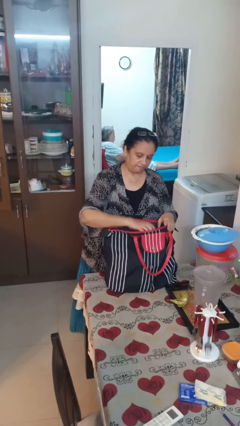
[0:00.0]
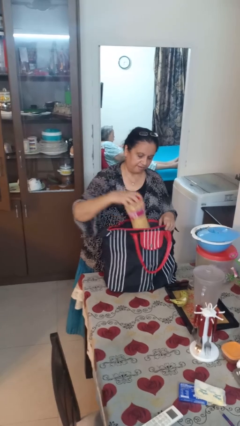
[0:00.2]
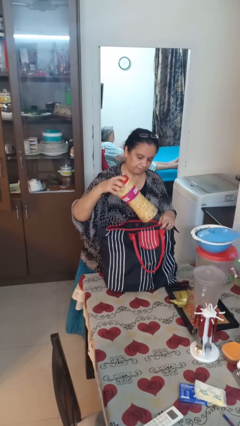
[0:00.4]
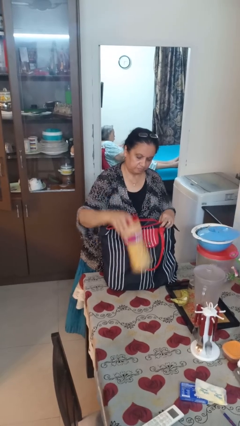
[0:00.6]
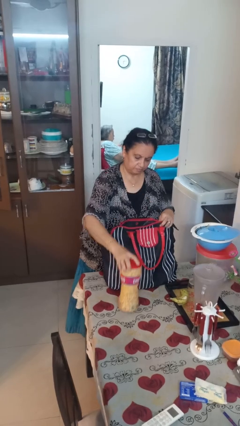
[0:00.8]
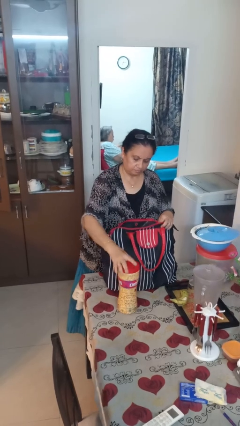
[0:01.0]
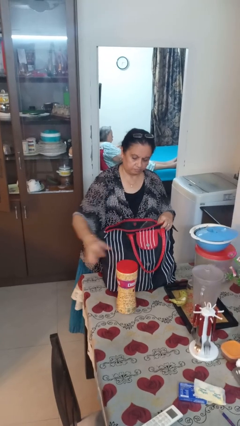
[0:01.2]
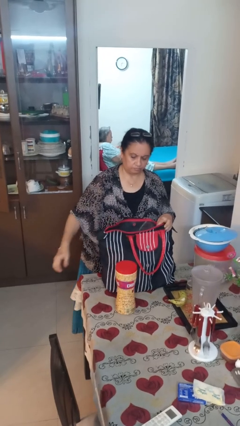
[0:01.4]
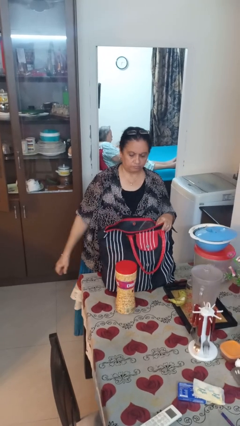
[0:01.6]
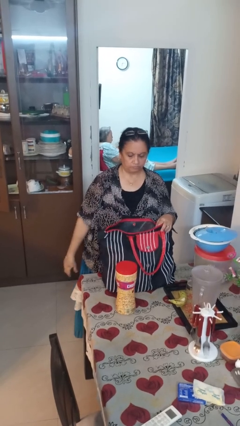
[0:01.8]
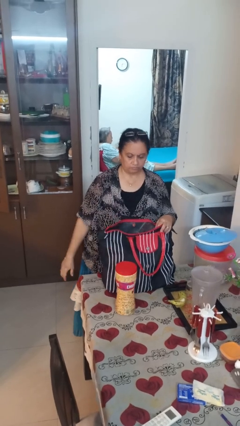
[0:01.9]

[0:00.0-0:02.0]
person takes object from bag

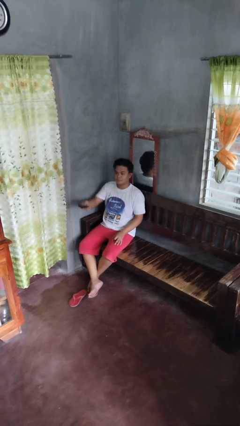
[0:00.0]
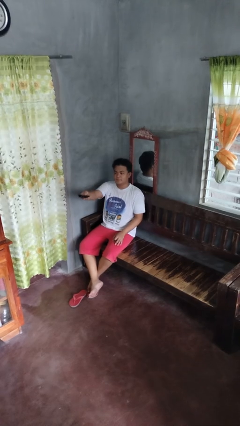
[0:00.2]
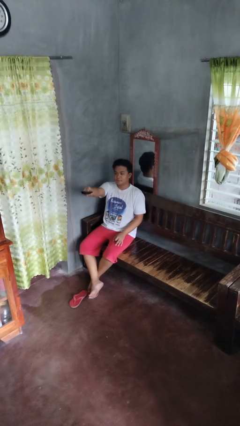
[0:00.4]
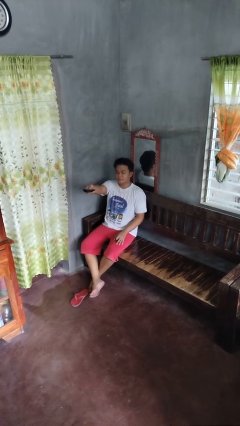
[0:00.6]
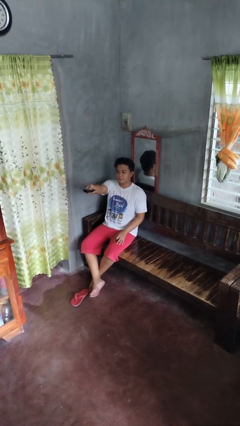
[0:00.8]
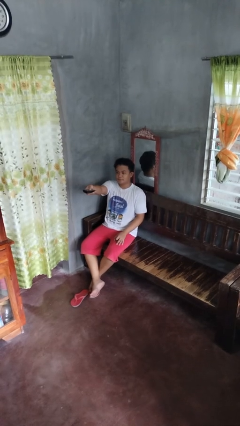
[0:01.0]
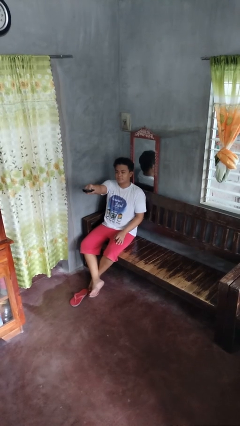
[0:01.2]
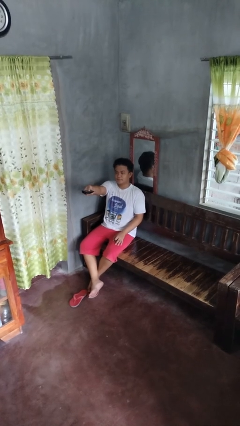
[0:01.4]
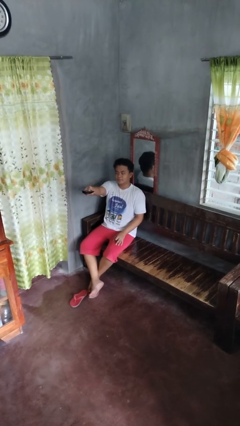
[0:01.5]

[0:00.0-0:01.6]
person uses television remote

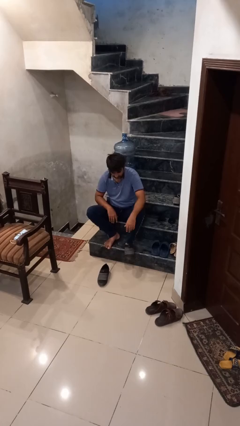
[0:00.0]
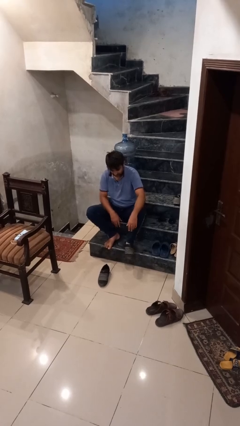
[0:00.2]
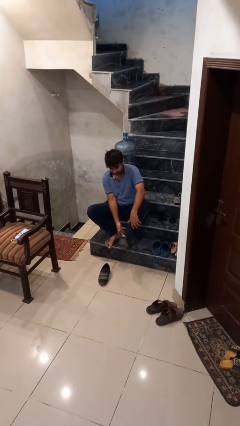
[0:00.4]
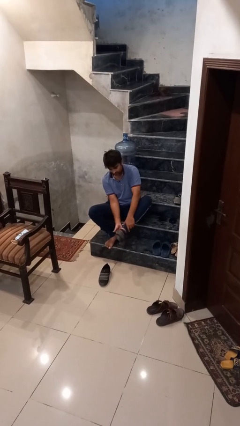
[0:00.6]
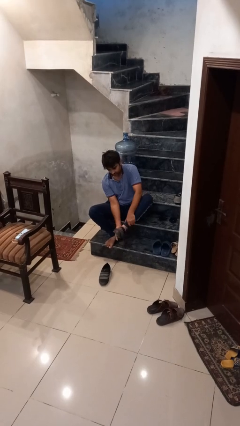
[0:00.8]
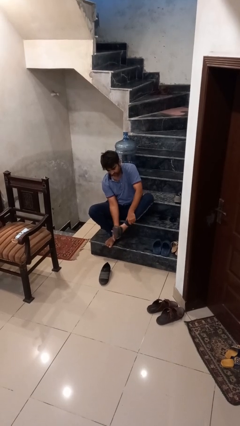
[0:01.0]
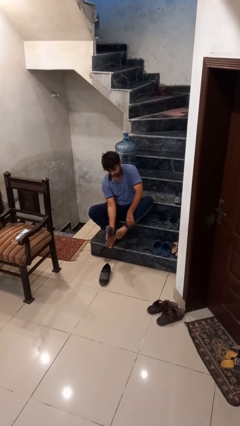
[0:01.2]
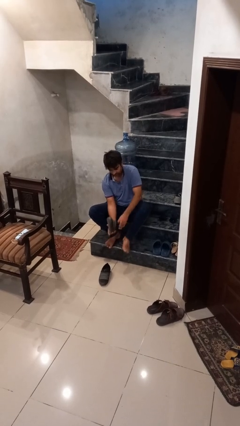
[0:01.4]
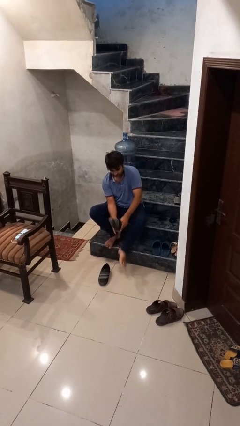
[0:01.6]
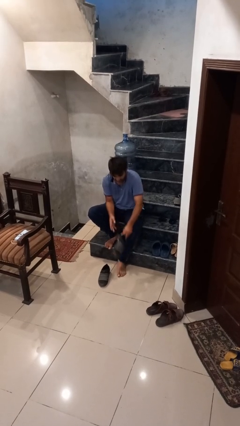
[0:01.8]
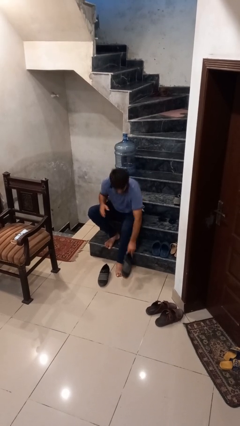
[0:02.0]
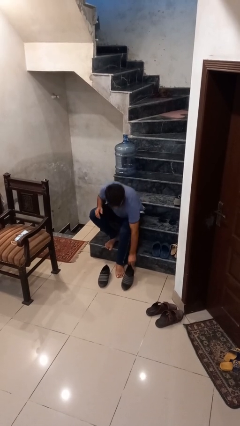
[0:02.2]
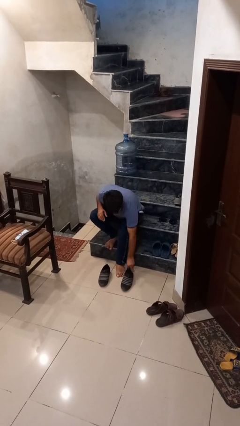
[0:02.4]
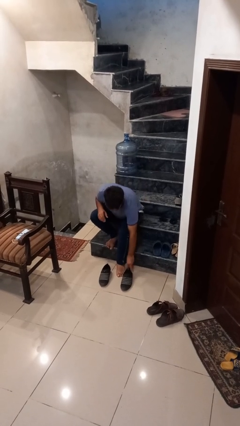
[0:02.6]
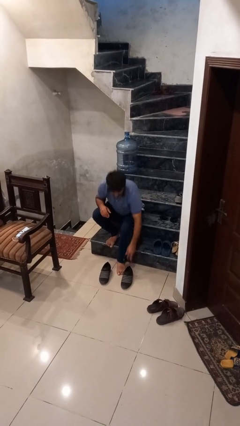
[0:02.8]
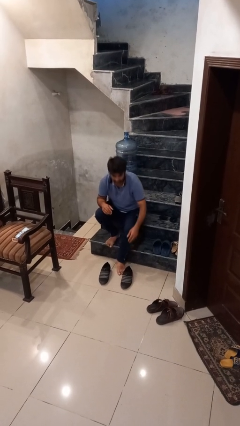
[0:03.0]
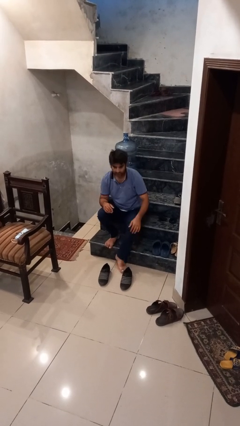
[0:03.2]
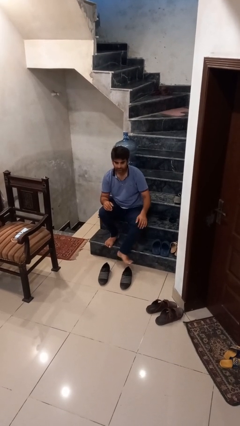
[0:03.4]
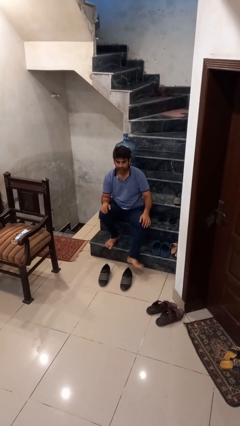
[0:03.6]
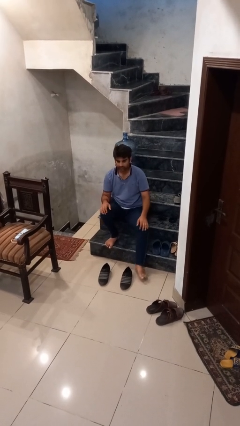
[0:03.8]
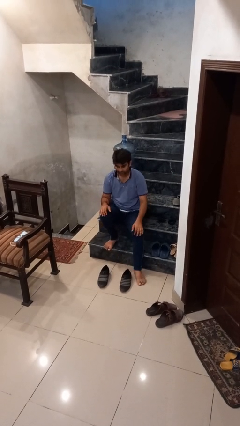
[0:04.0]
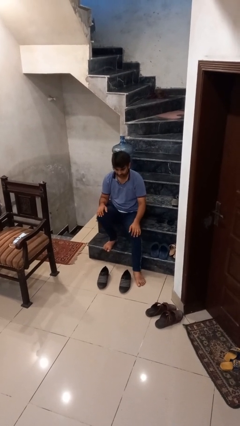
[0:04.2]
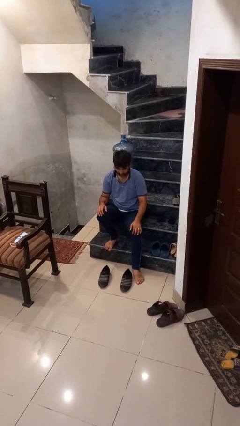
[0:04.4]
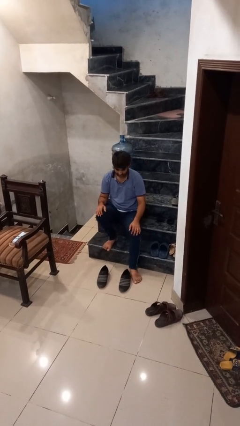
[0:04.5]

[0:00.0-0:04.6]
person takes off shoes

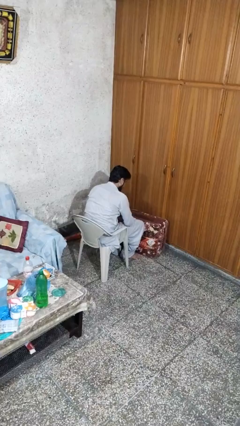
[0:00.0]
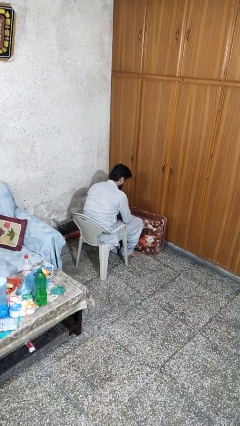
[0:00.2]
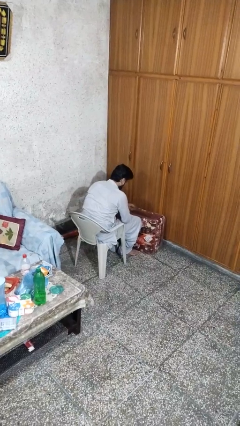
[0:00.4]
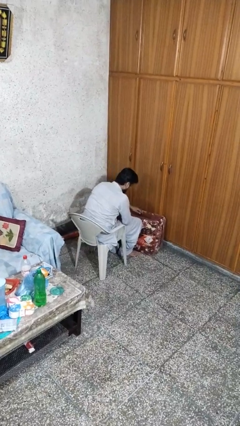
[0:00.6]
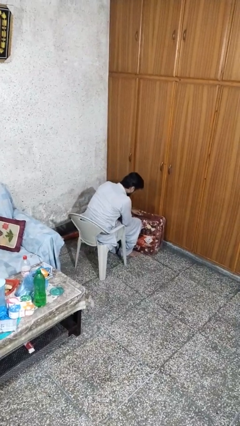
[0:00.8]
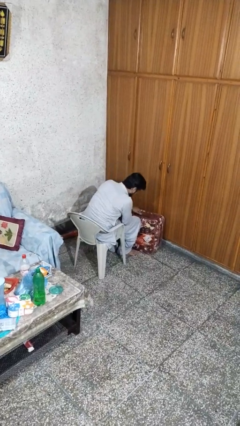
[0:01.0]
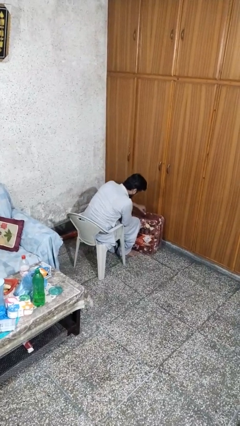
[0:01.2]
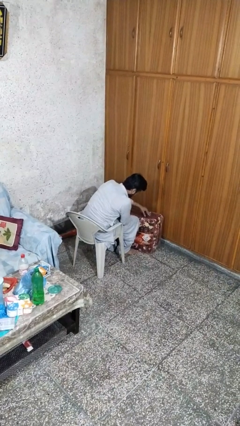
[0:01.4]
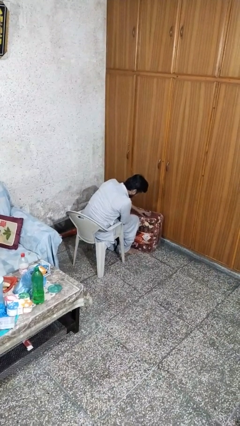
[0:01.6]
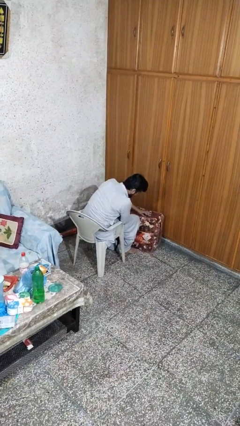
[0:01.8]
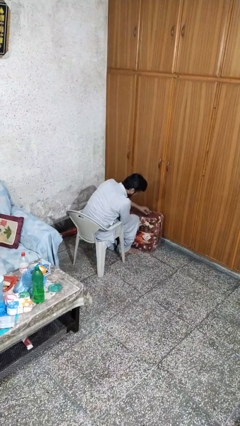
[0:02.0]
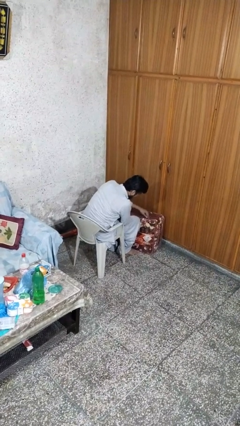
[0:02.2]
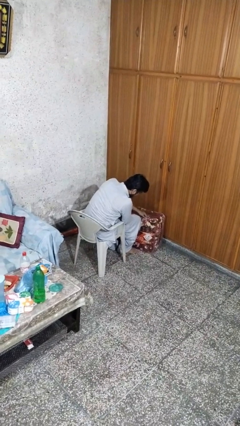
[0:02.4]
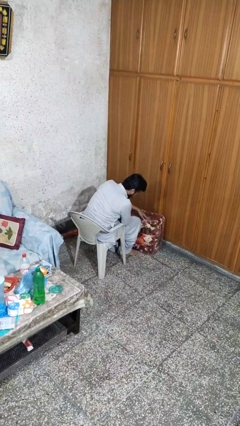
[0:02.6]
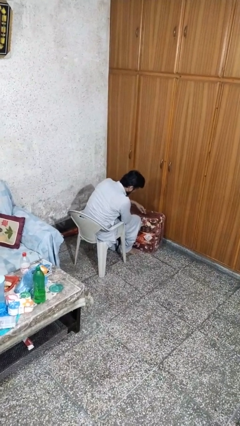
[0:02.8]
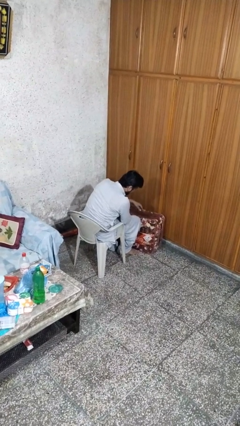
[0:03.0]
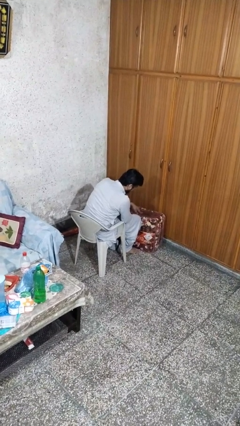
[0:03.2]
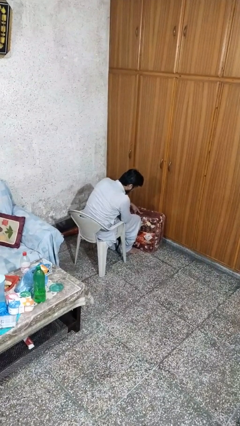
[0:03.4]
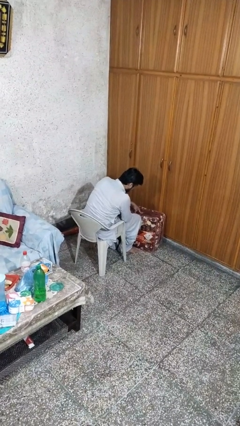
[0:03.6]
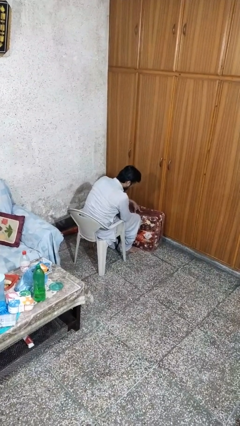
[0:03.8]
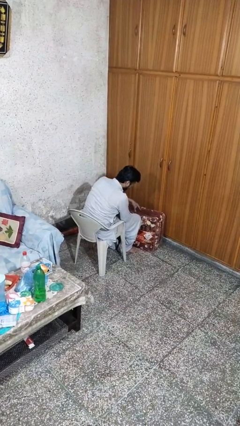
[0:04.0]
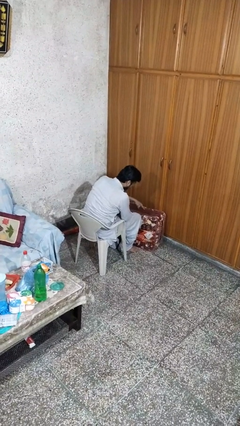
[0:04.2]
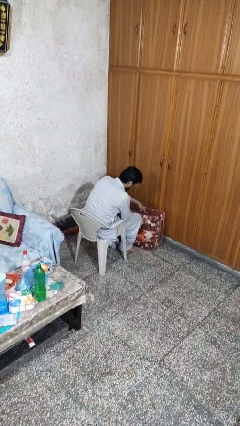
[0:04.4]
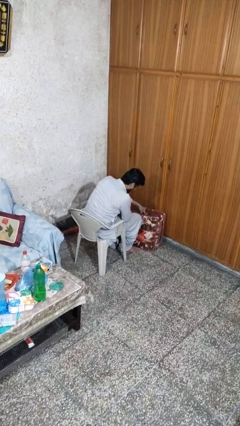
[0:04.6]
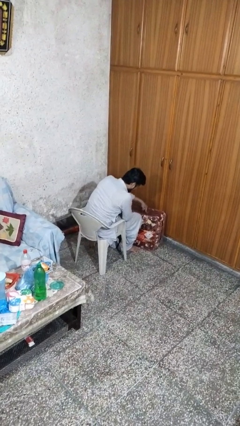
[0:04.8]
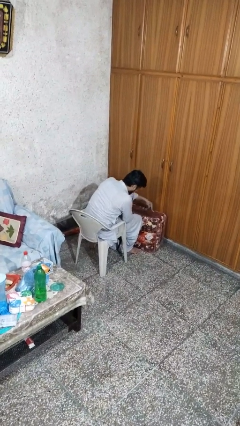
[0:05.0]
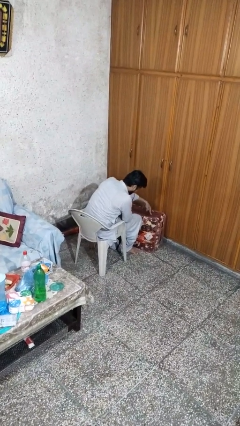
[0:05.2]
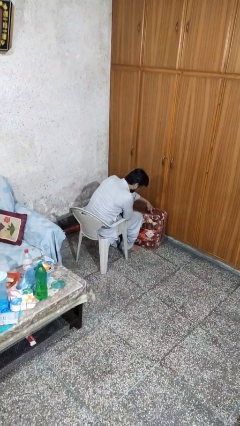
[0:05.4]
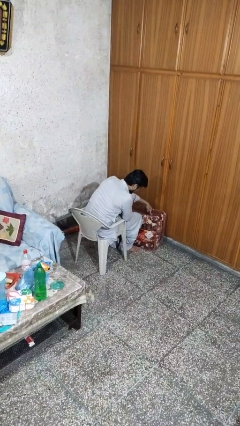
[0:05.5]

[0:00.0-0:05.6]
person taps object with finger

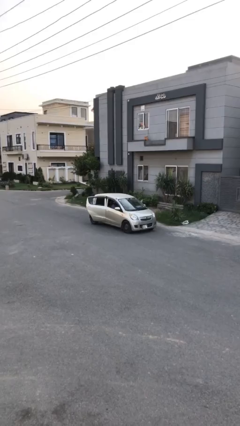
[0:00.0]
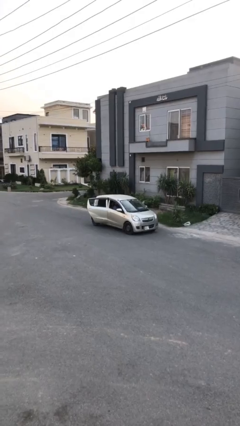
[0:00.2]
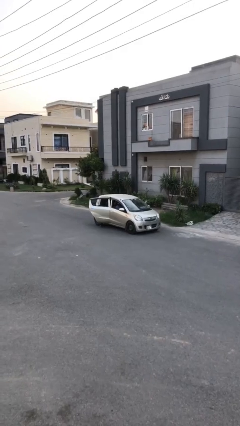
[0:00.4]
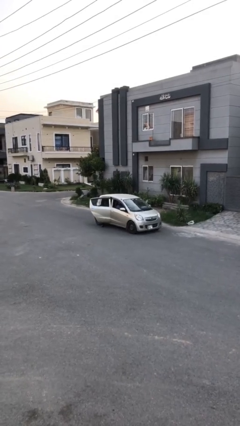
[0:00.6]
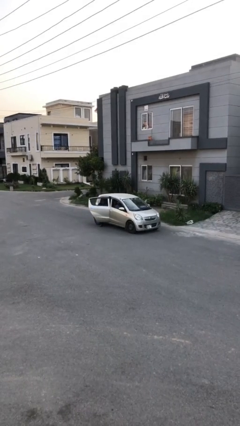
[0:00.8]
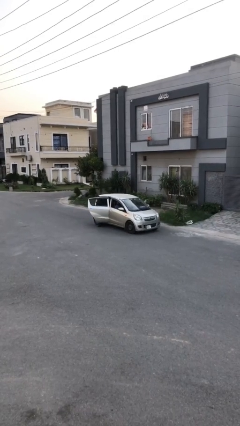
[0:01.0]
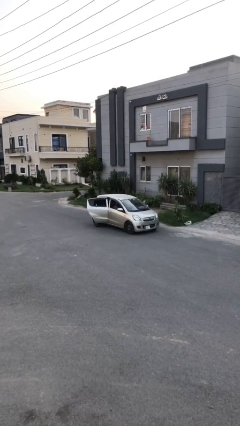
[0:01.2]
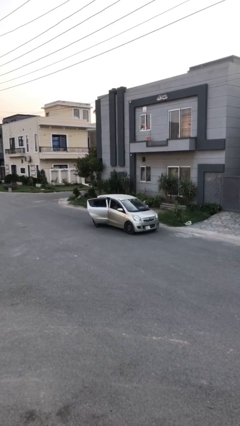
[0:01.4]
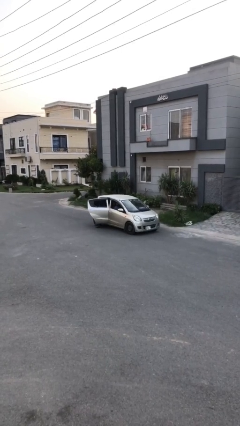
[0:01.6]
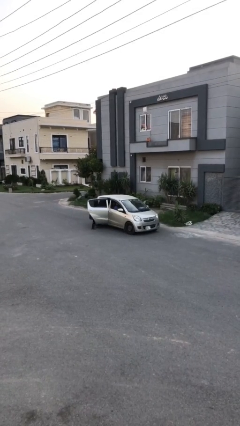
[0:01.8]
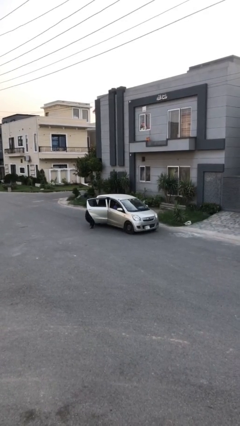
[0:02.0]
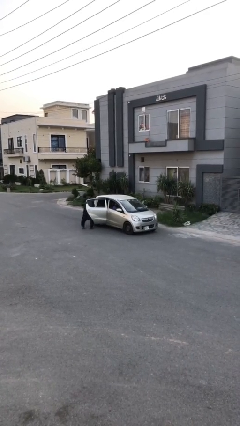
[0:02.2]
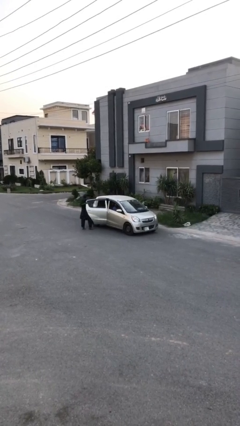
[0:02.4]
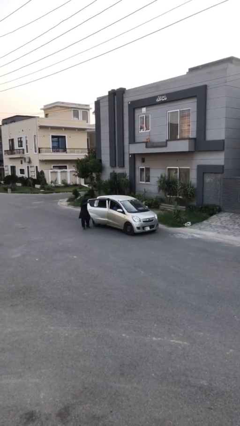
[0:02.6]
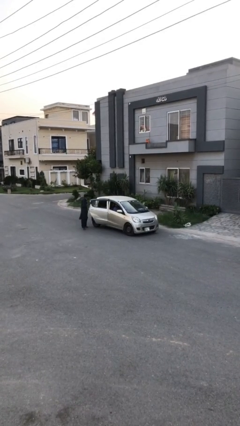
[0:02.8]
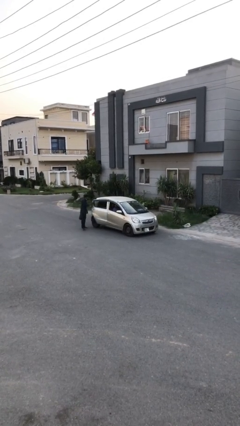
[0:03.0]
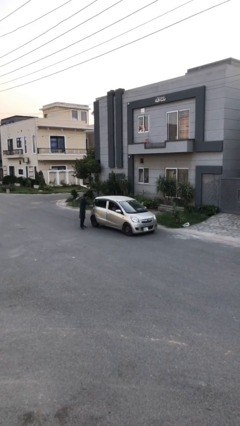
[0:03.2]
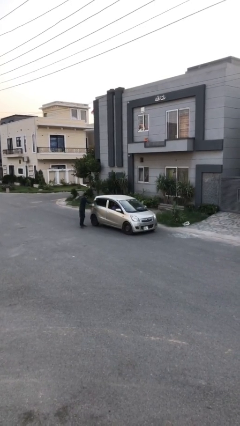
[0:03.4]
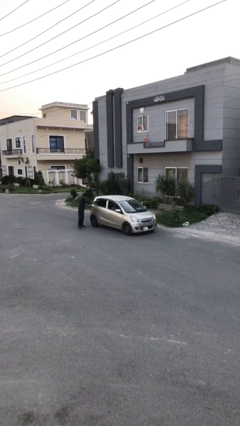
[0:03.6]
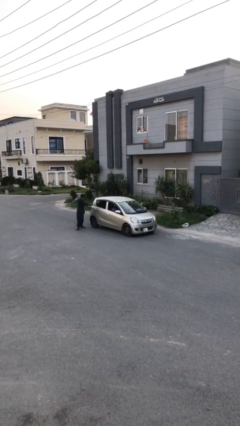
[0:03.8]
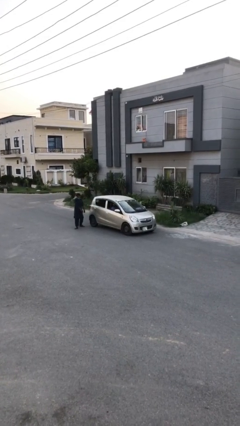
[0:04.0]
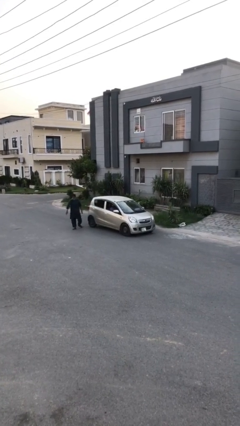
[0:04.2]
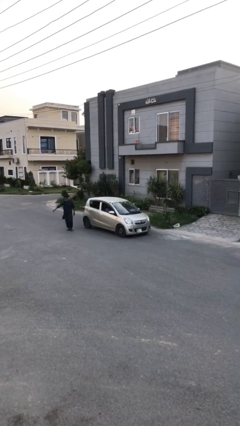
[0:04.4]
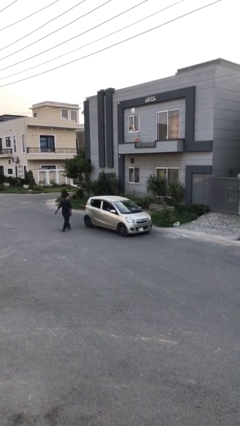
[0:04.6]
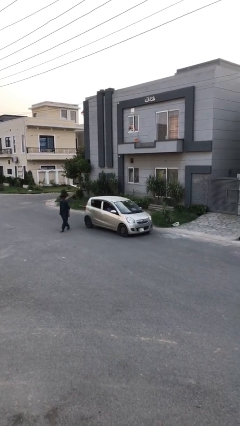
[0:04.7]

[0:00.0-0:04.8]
car drops off person
